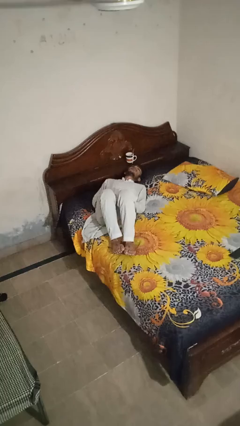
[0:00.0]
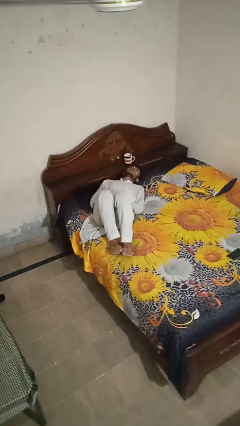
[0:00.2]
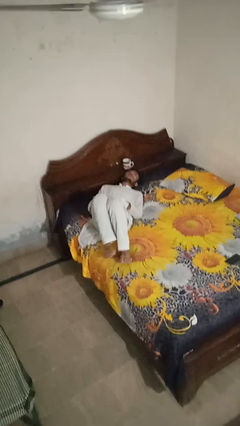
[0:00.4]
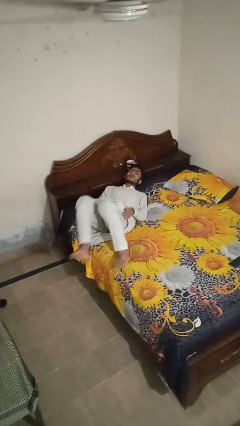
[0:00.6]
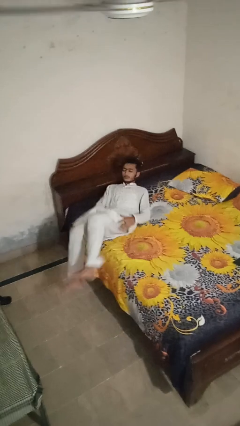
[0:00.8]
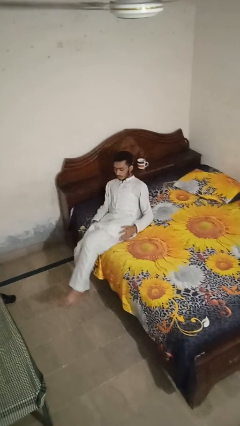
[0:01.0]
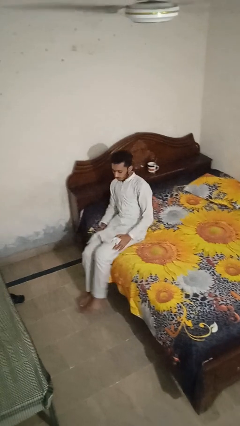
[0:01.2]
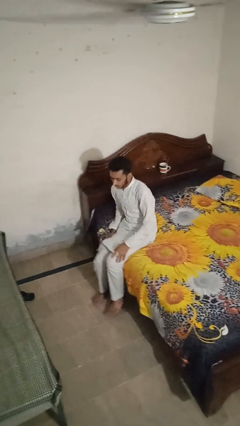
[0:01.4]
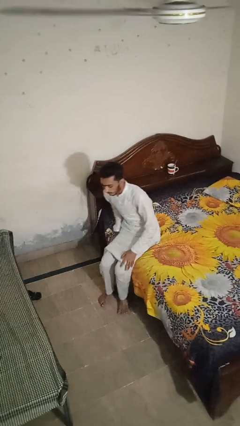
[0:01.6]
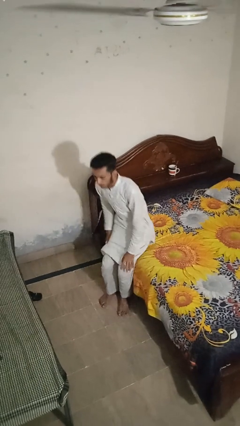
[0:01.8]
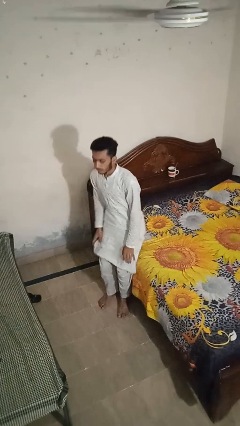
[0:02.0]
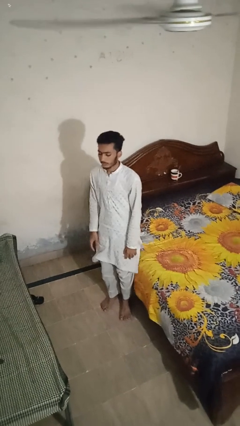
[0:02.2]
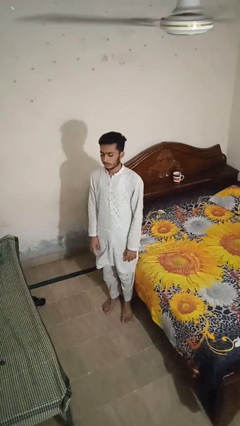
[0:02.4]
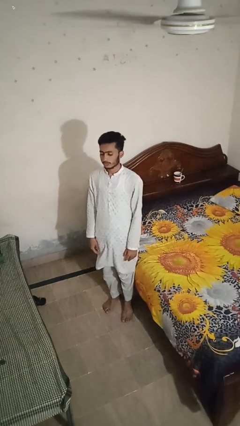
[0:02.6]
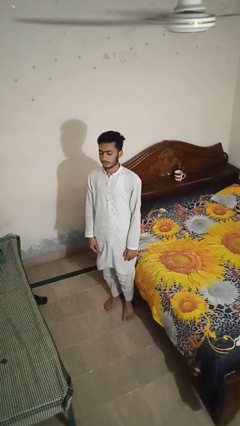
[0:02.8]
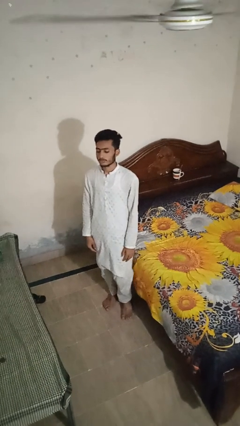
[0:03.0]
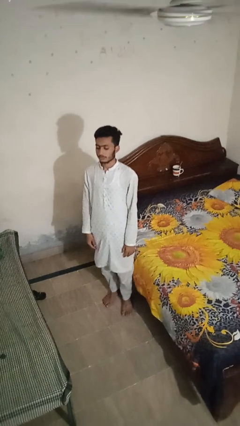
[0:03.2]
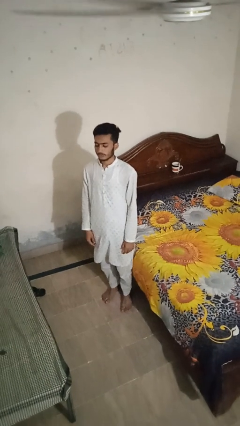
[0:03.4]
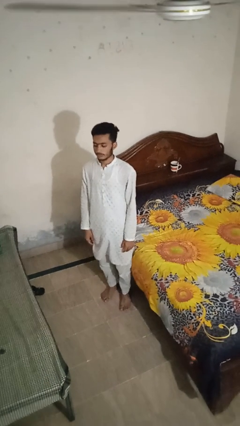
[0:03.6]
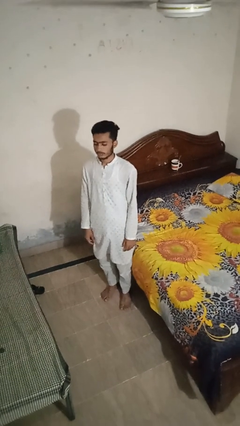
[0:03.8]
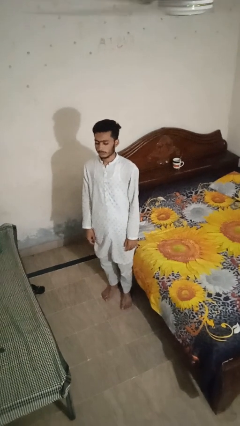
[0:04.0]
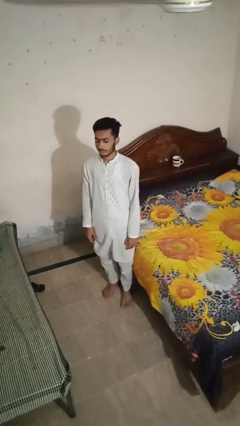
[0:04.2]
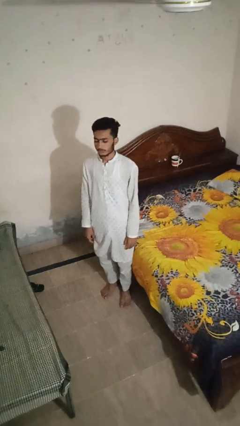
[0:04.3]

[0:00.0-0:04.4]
person stands up

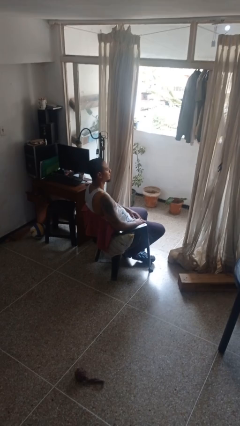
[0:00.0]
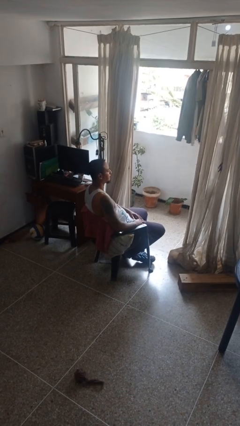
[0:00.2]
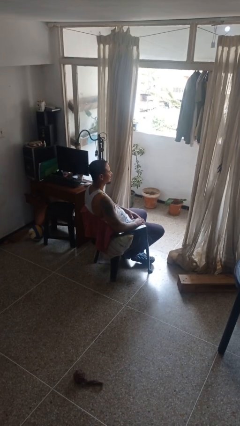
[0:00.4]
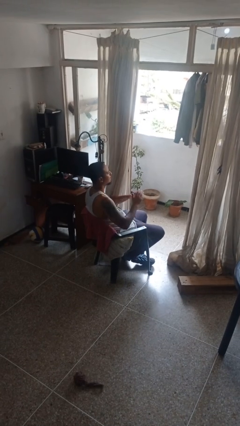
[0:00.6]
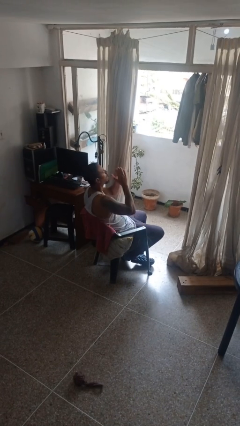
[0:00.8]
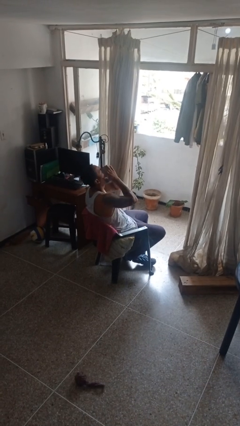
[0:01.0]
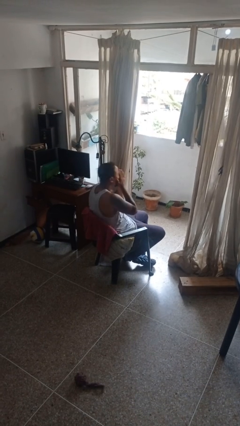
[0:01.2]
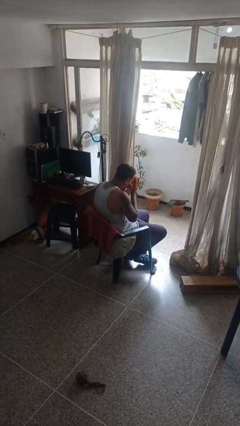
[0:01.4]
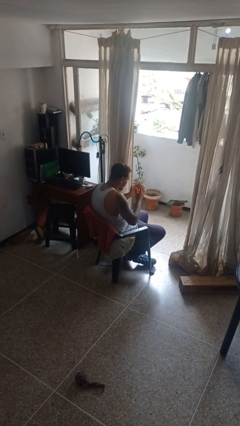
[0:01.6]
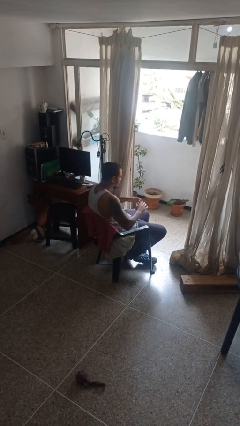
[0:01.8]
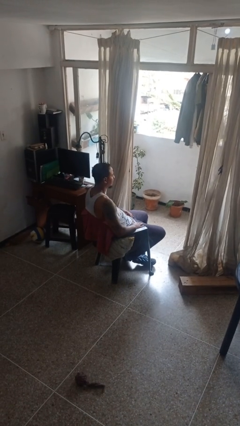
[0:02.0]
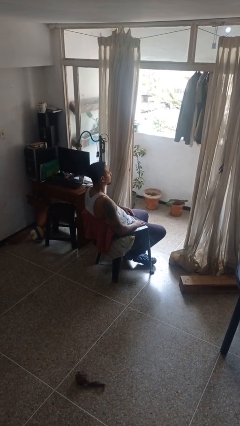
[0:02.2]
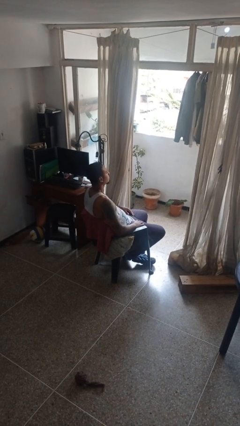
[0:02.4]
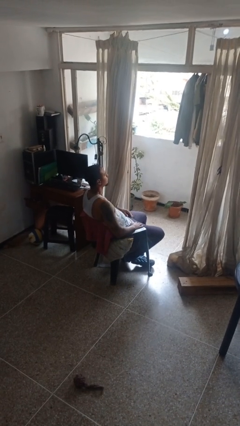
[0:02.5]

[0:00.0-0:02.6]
person sneezes into hand

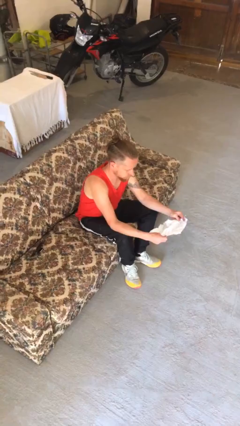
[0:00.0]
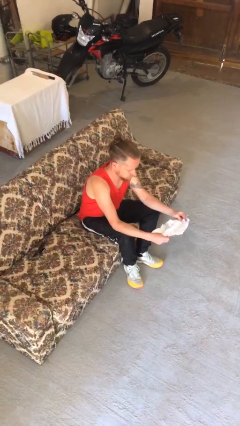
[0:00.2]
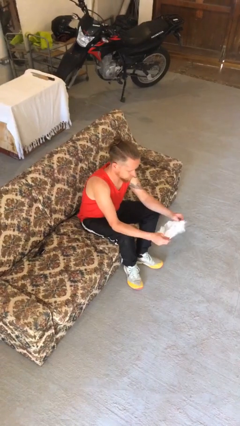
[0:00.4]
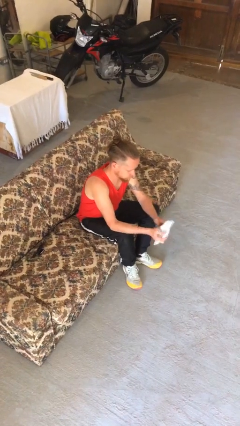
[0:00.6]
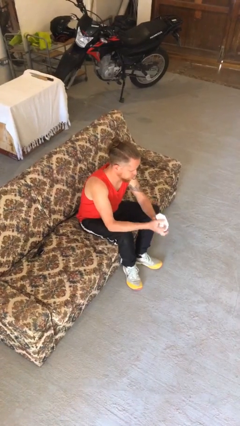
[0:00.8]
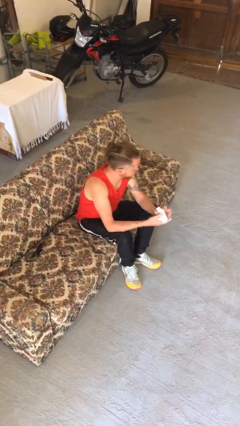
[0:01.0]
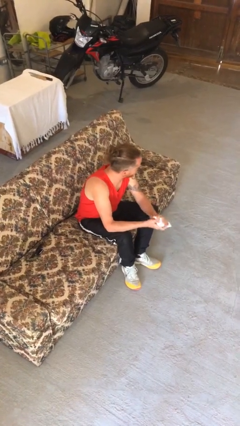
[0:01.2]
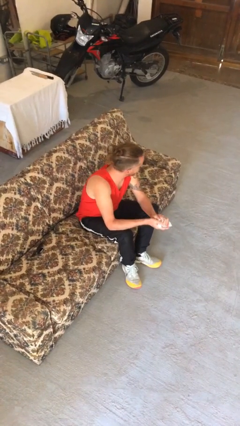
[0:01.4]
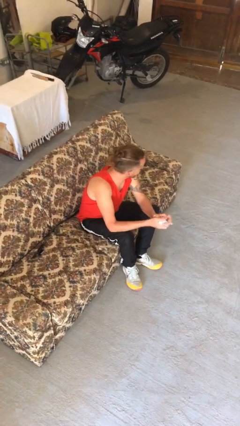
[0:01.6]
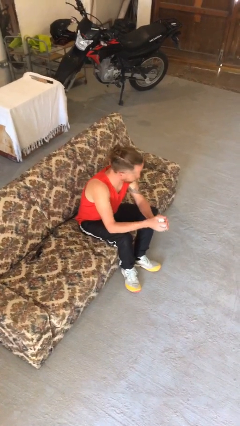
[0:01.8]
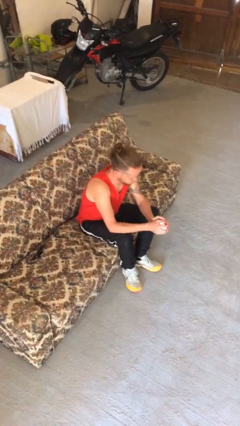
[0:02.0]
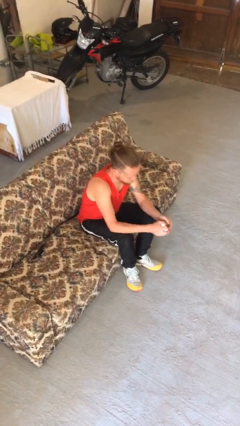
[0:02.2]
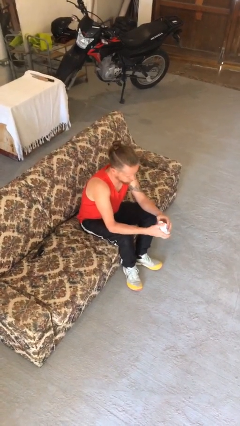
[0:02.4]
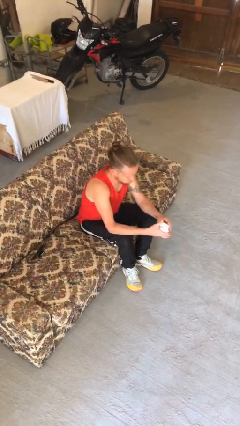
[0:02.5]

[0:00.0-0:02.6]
person crumples paper

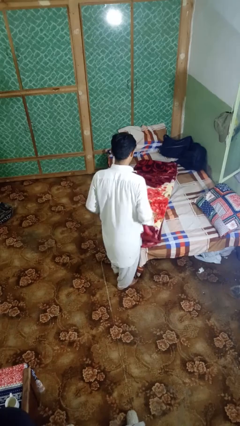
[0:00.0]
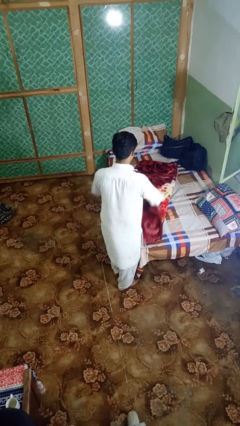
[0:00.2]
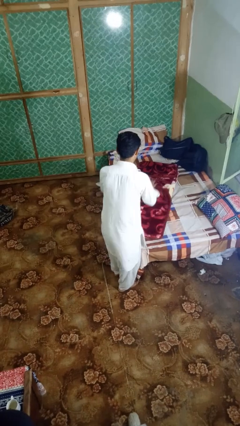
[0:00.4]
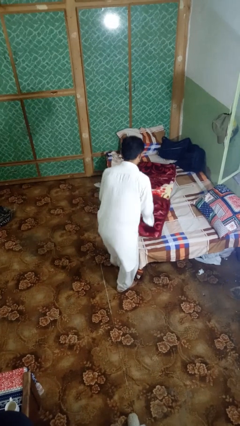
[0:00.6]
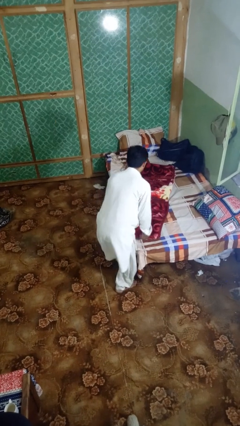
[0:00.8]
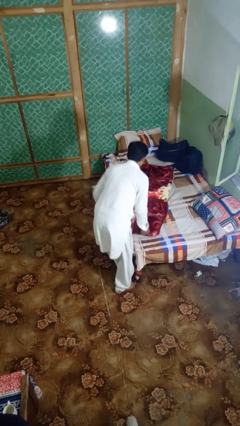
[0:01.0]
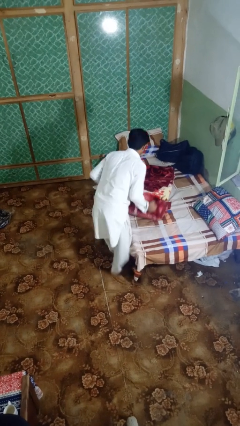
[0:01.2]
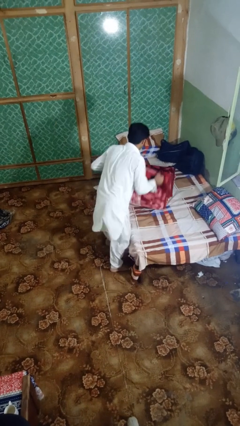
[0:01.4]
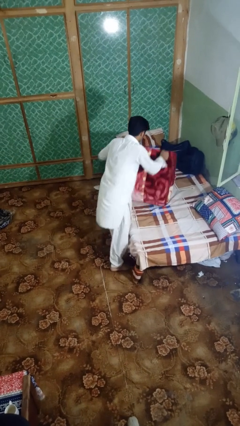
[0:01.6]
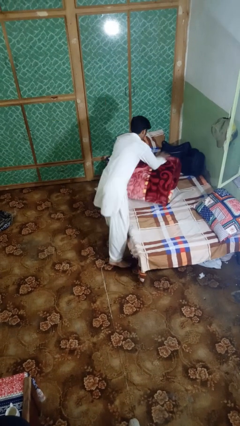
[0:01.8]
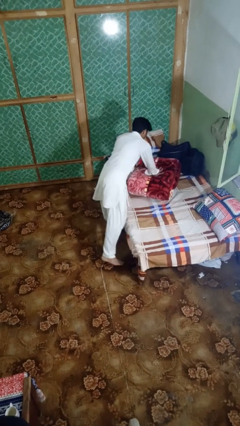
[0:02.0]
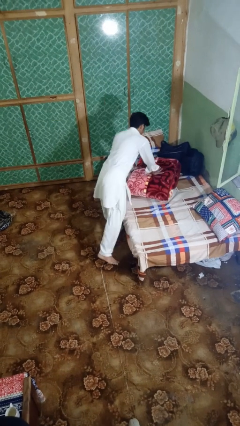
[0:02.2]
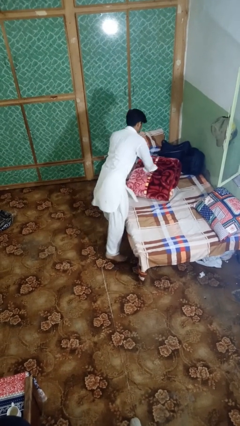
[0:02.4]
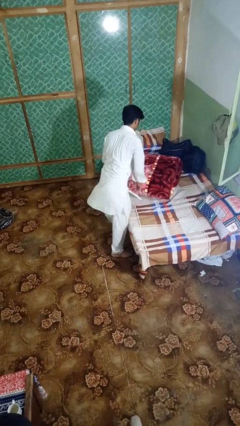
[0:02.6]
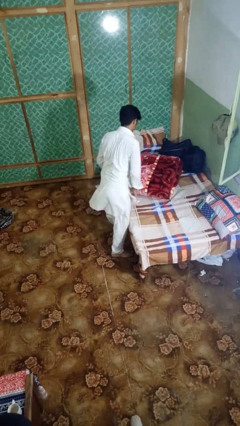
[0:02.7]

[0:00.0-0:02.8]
person folds blanket

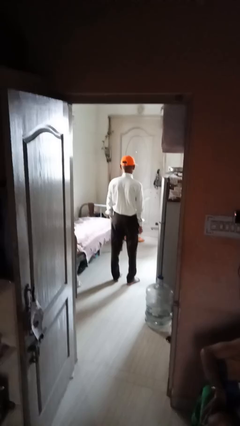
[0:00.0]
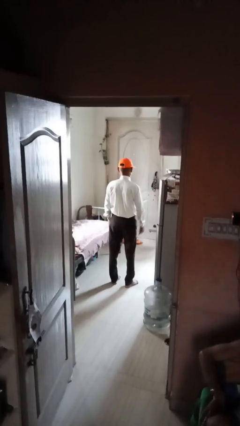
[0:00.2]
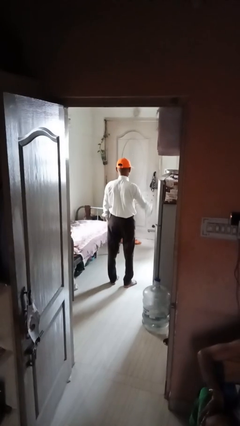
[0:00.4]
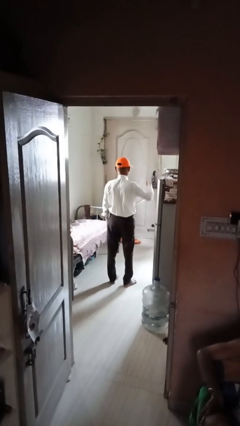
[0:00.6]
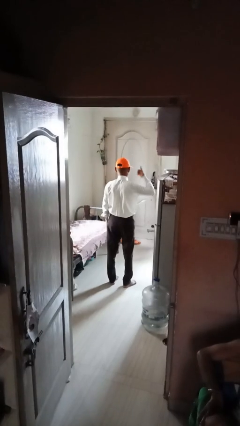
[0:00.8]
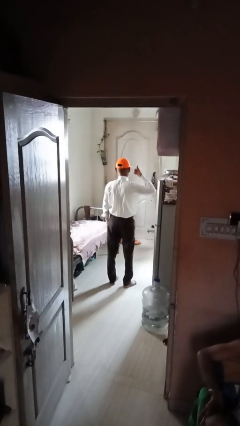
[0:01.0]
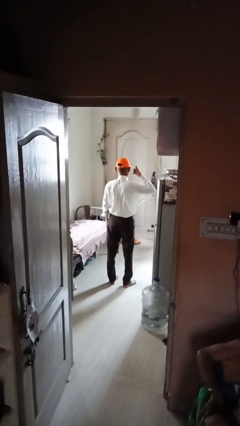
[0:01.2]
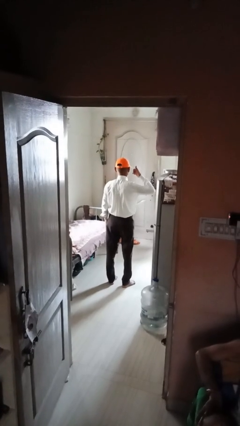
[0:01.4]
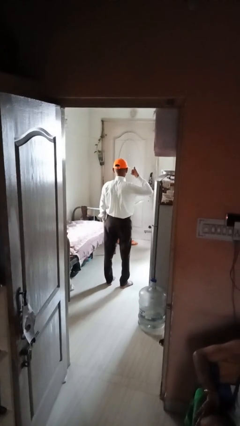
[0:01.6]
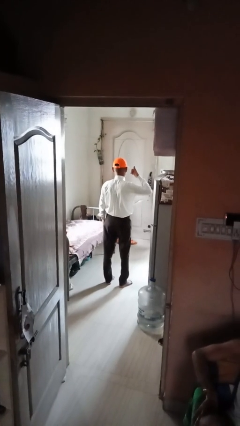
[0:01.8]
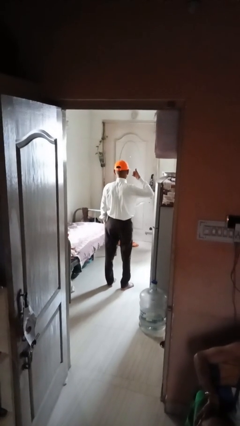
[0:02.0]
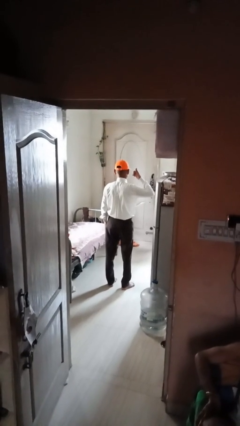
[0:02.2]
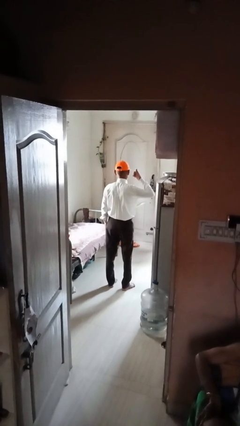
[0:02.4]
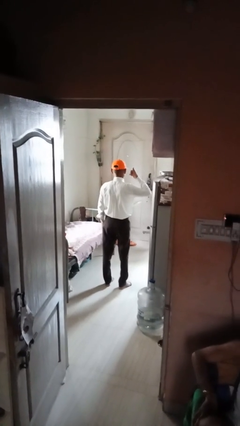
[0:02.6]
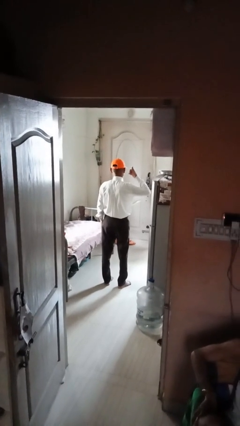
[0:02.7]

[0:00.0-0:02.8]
person gestures call me

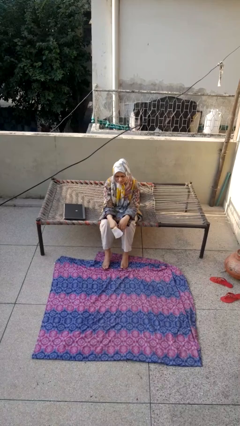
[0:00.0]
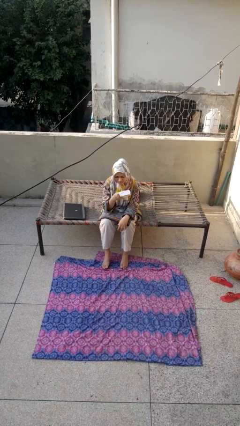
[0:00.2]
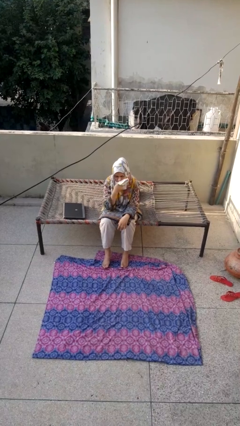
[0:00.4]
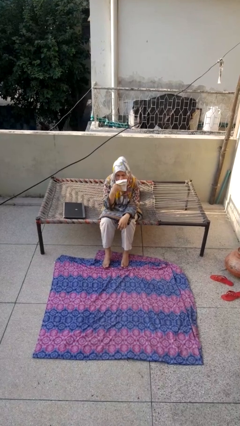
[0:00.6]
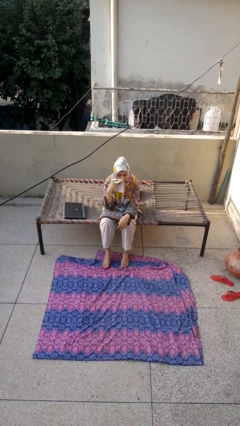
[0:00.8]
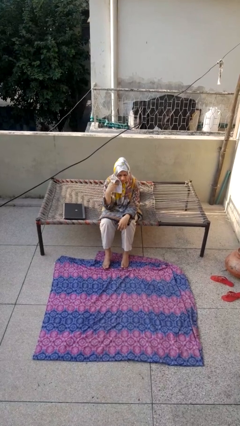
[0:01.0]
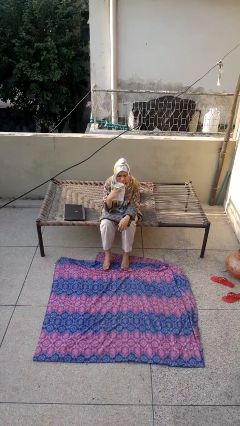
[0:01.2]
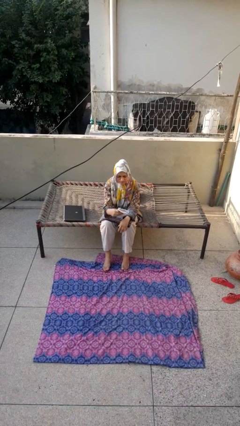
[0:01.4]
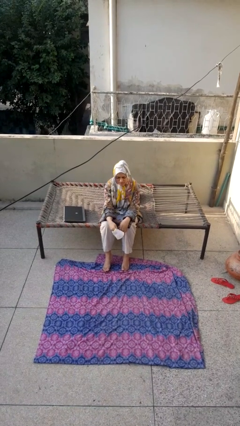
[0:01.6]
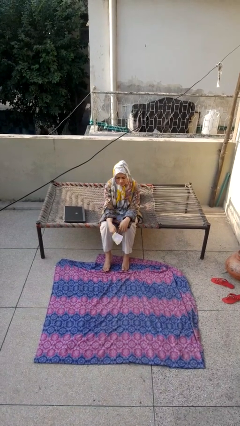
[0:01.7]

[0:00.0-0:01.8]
person wipes mouth with napkin

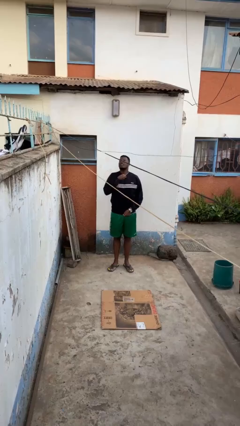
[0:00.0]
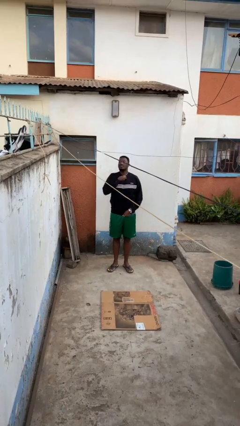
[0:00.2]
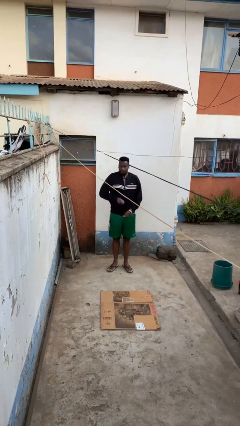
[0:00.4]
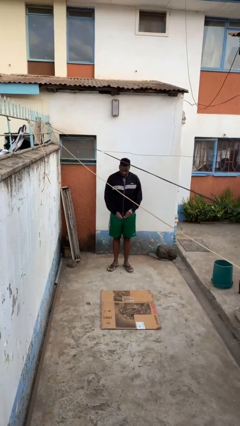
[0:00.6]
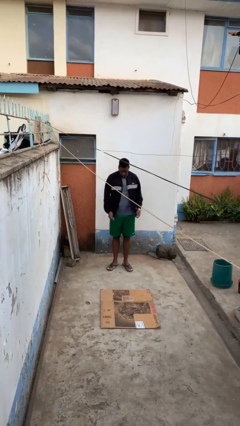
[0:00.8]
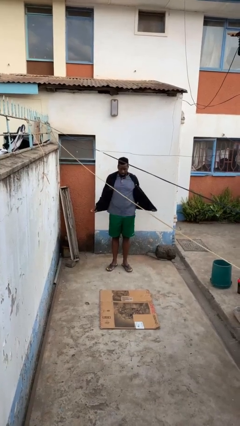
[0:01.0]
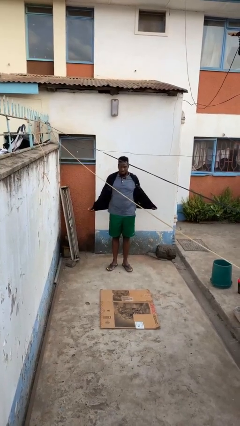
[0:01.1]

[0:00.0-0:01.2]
person unzips jacket
